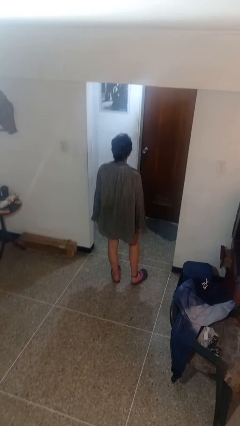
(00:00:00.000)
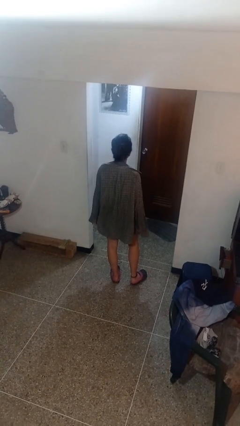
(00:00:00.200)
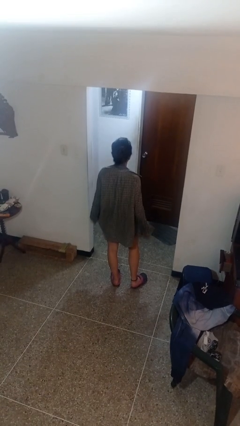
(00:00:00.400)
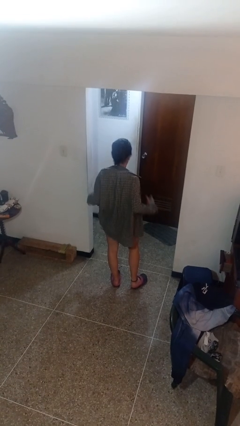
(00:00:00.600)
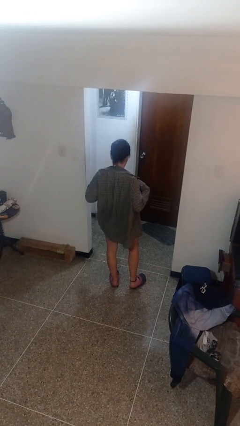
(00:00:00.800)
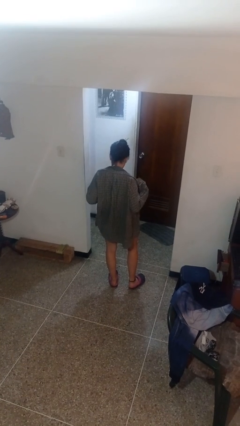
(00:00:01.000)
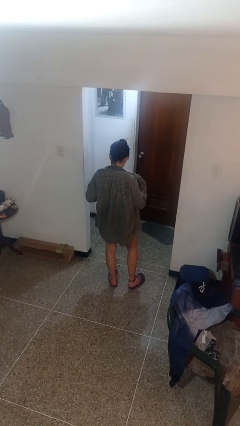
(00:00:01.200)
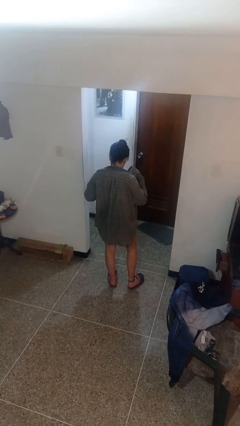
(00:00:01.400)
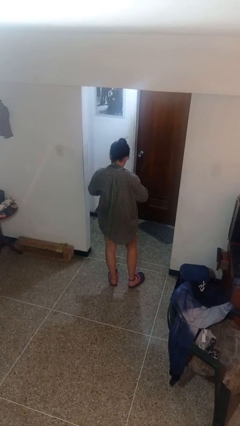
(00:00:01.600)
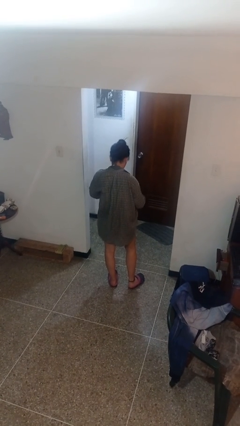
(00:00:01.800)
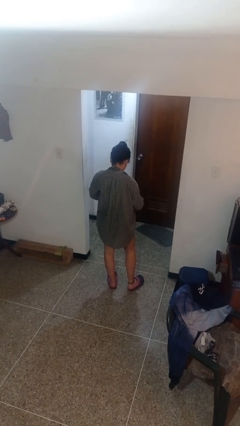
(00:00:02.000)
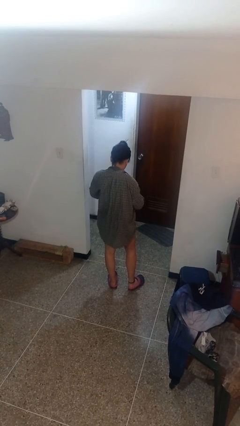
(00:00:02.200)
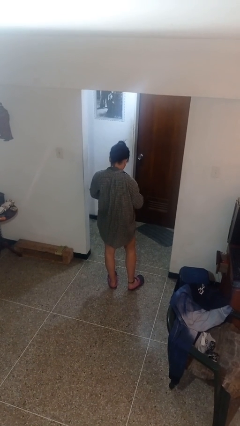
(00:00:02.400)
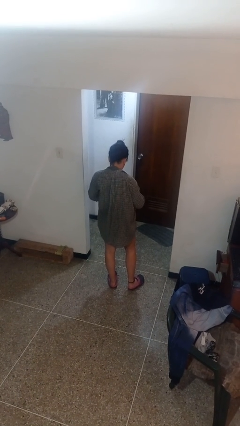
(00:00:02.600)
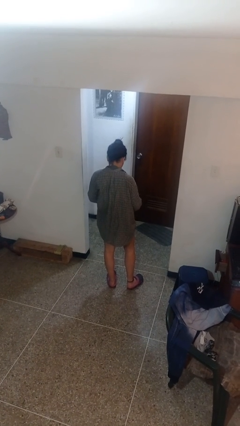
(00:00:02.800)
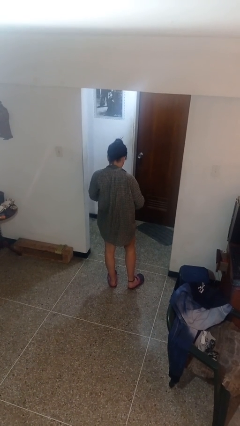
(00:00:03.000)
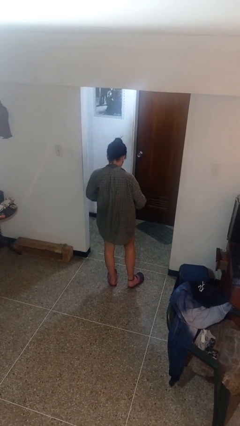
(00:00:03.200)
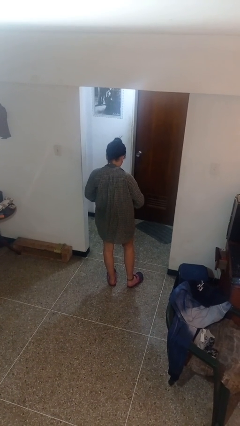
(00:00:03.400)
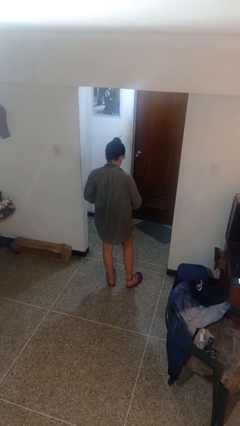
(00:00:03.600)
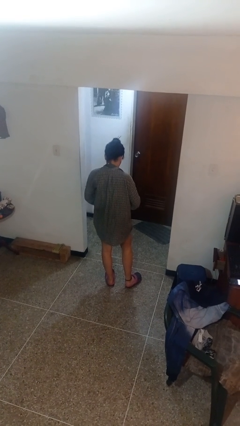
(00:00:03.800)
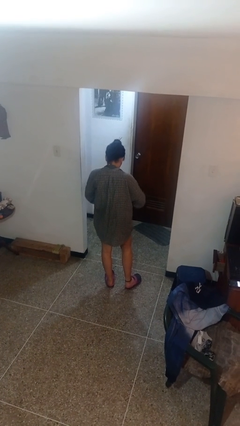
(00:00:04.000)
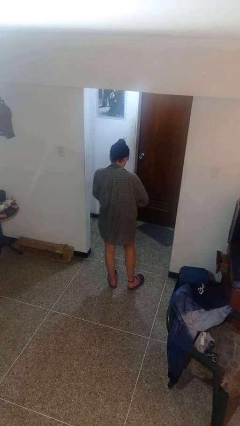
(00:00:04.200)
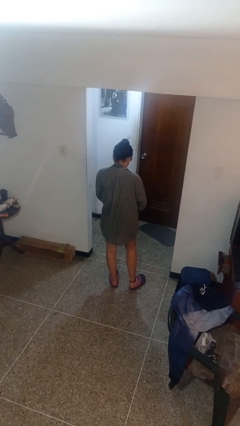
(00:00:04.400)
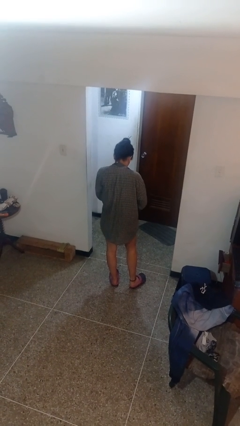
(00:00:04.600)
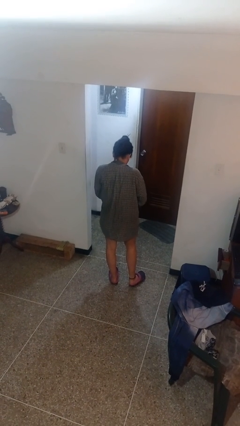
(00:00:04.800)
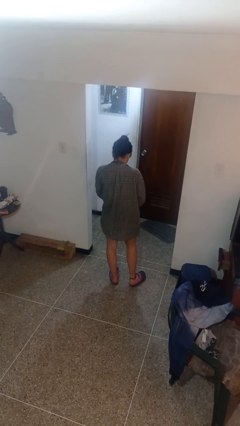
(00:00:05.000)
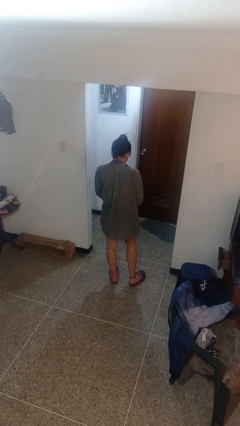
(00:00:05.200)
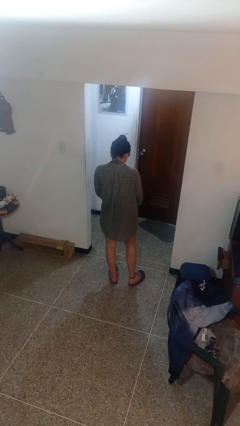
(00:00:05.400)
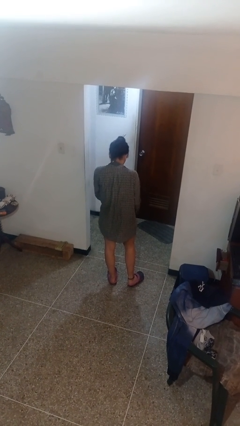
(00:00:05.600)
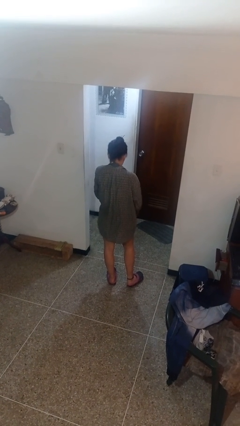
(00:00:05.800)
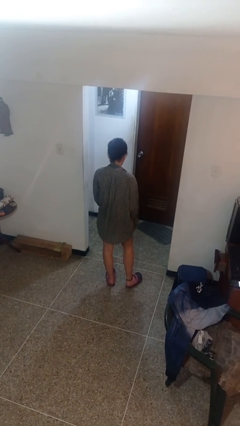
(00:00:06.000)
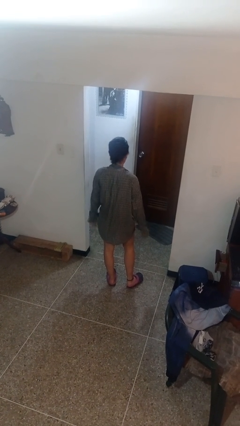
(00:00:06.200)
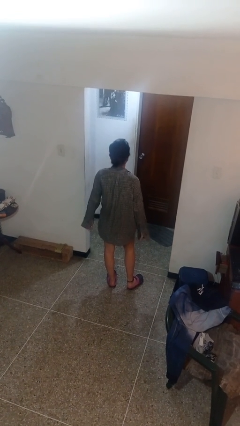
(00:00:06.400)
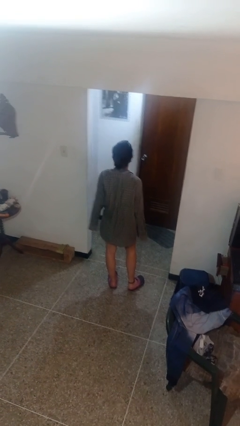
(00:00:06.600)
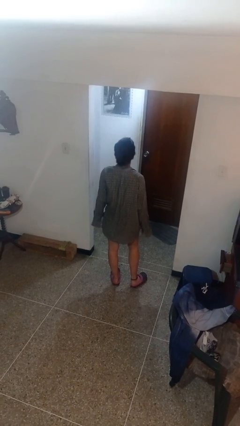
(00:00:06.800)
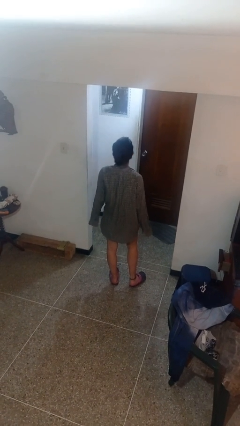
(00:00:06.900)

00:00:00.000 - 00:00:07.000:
person buttons shirt

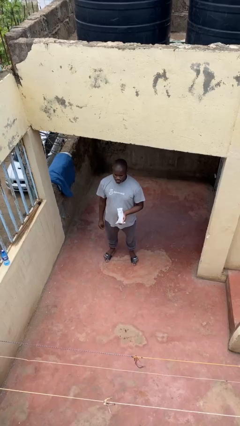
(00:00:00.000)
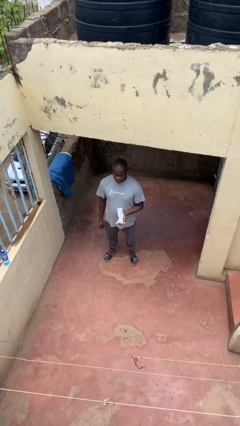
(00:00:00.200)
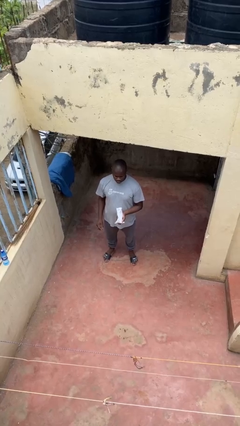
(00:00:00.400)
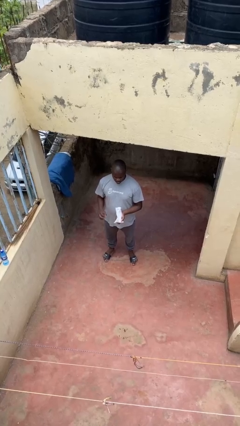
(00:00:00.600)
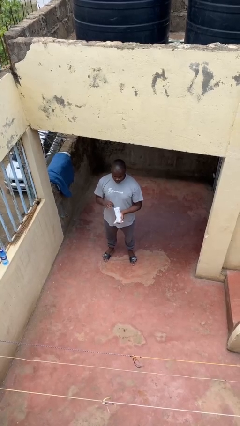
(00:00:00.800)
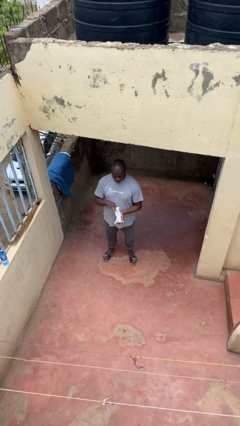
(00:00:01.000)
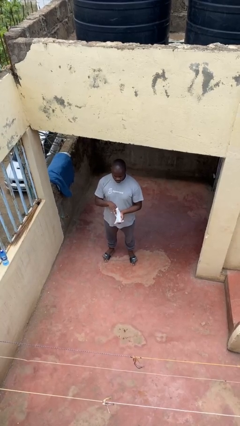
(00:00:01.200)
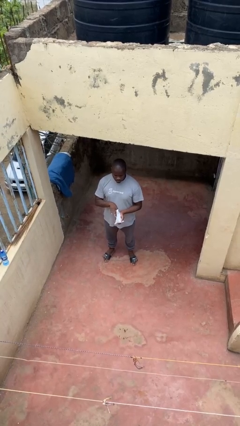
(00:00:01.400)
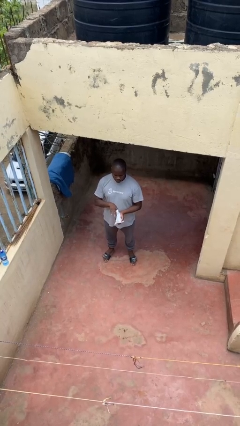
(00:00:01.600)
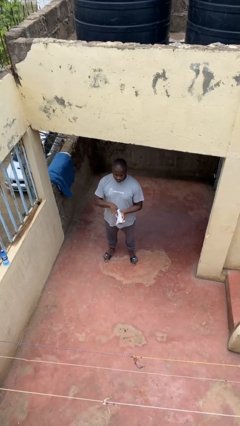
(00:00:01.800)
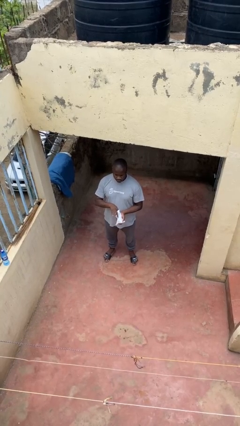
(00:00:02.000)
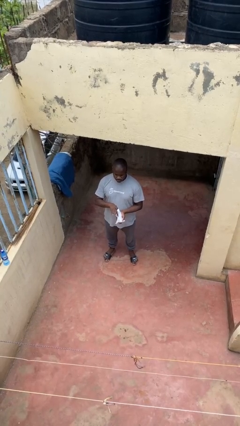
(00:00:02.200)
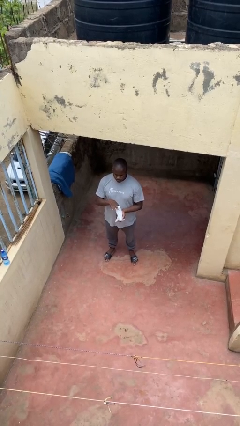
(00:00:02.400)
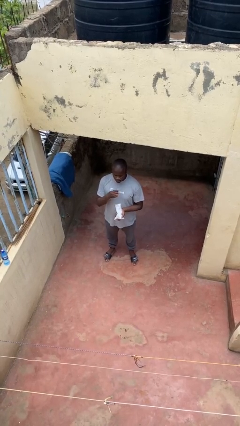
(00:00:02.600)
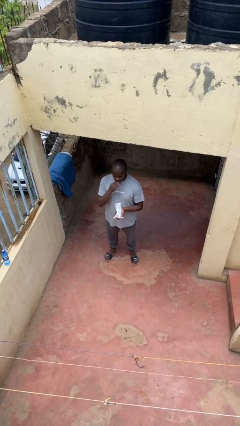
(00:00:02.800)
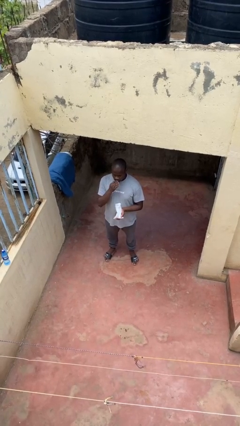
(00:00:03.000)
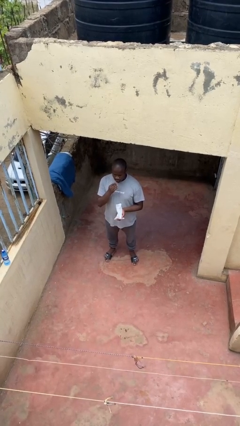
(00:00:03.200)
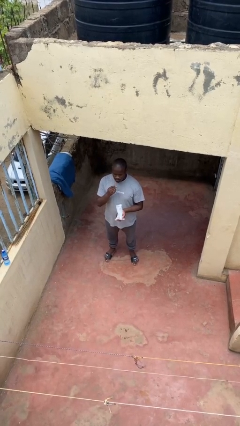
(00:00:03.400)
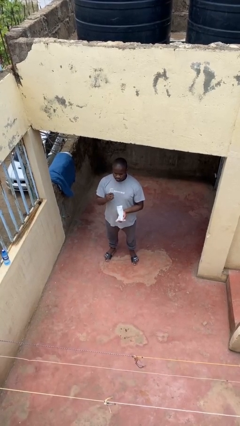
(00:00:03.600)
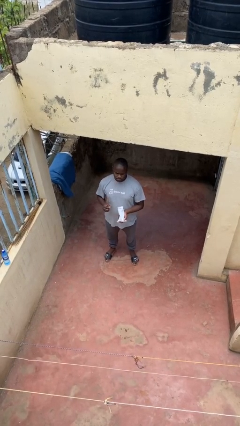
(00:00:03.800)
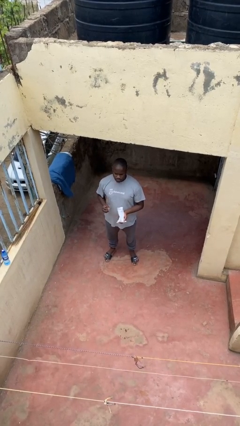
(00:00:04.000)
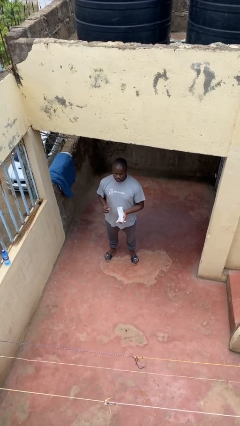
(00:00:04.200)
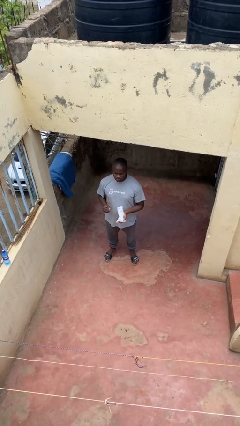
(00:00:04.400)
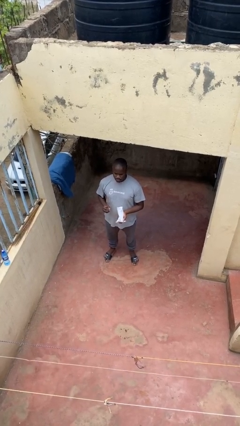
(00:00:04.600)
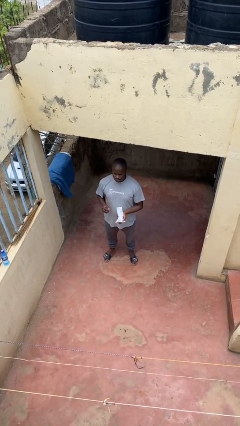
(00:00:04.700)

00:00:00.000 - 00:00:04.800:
person eats snack from bag

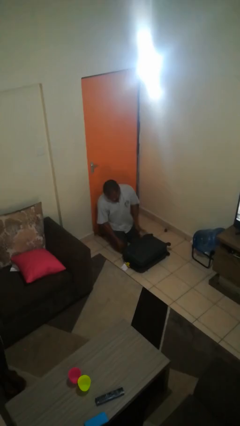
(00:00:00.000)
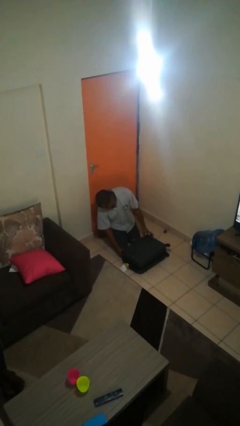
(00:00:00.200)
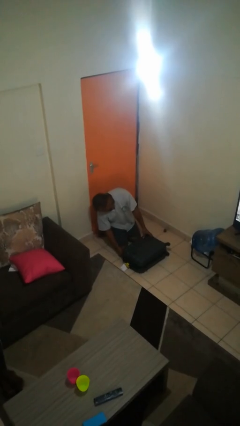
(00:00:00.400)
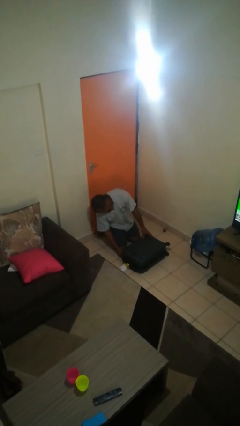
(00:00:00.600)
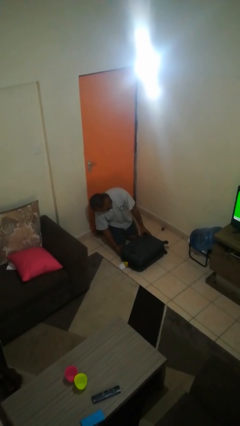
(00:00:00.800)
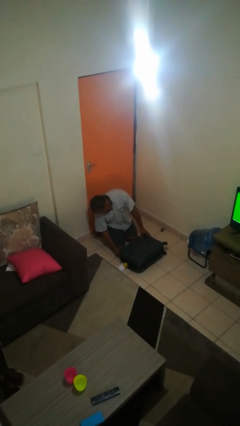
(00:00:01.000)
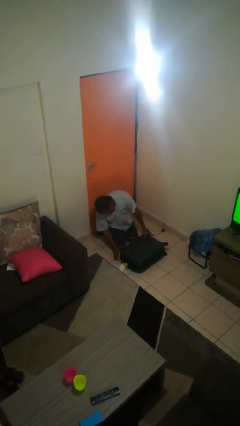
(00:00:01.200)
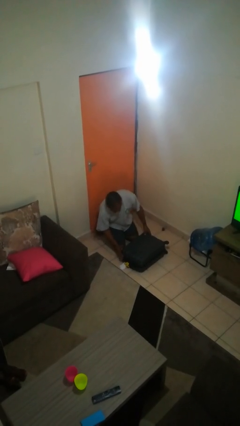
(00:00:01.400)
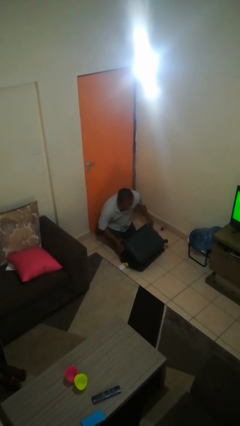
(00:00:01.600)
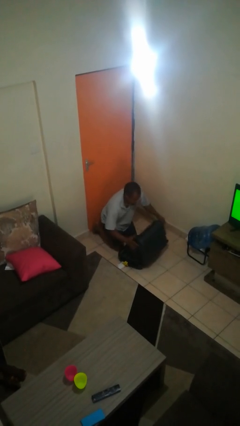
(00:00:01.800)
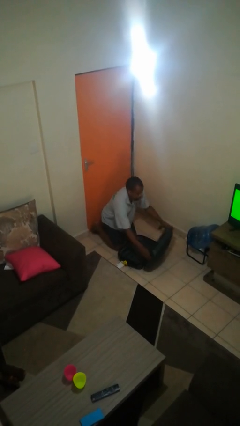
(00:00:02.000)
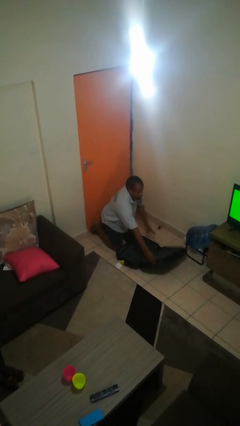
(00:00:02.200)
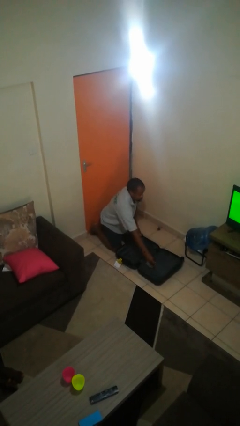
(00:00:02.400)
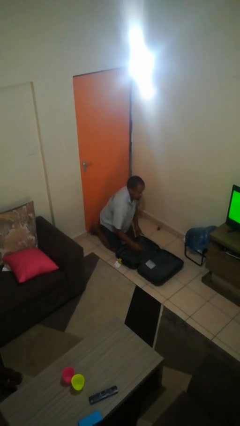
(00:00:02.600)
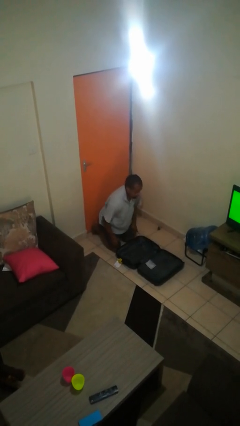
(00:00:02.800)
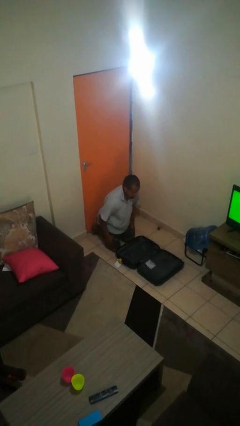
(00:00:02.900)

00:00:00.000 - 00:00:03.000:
person opens suitcase

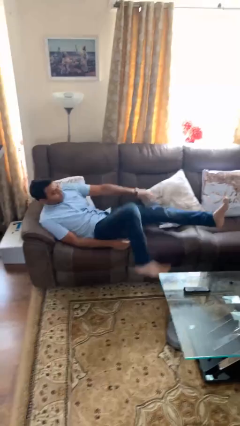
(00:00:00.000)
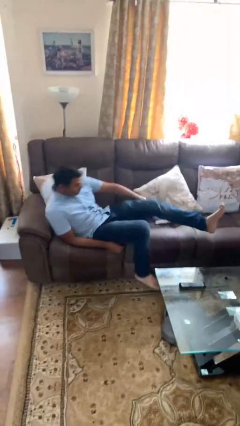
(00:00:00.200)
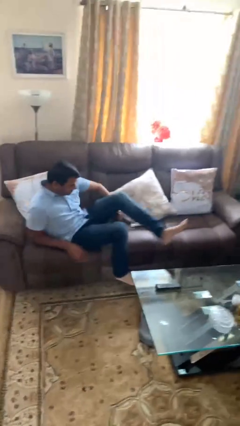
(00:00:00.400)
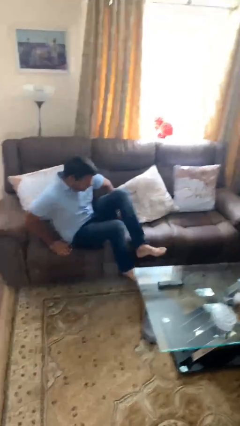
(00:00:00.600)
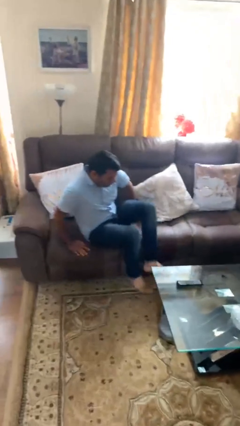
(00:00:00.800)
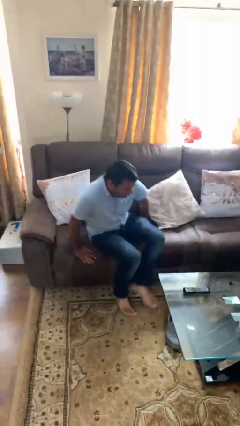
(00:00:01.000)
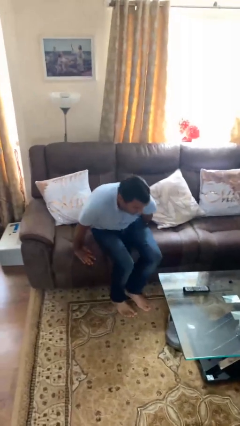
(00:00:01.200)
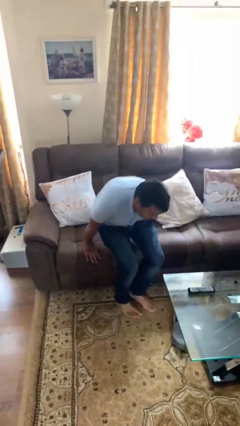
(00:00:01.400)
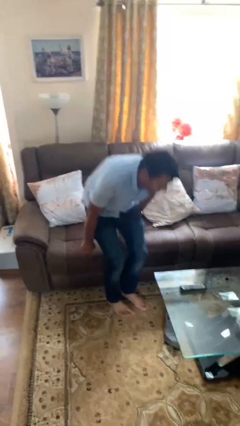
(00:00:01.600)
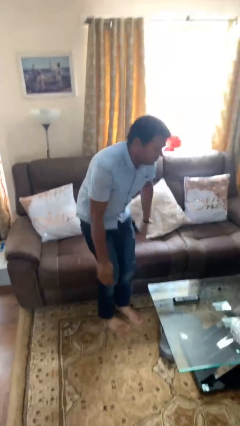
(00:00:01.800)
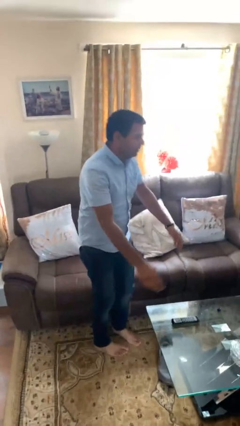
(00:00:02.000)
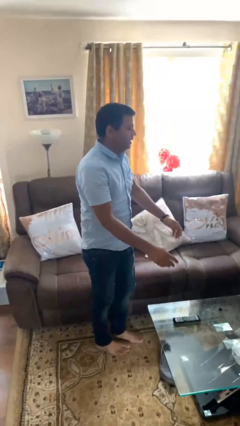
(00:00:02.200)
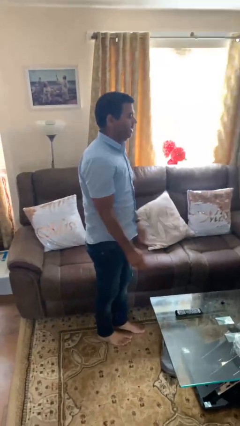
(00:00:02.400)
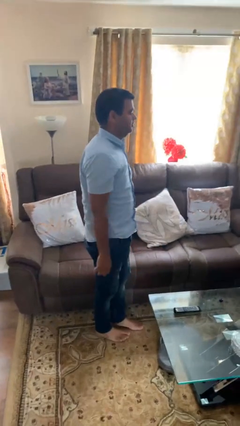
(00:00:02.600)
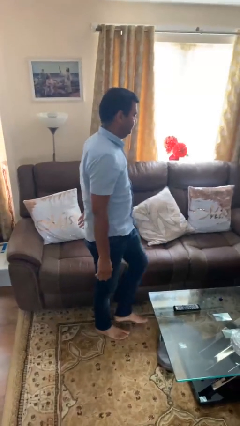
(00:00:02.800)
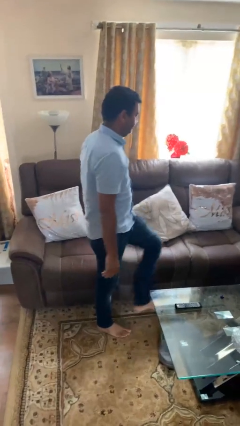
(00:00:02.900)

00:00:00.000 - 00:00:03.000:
person stands up
